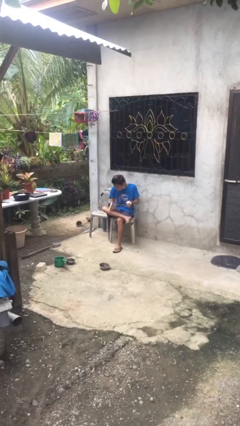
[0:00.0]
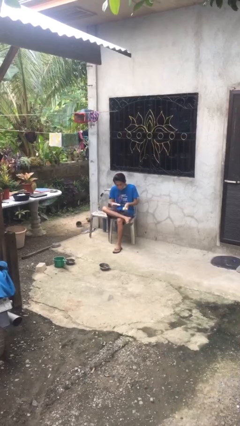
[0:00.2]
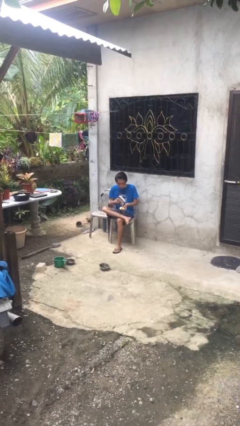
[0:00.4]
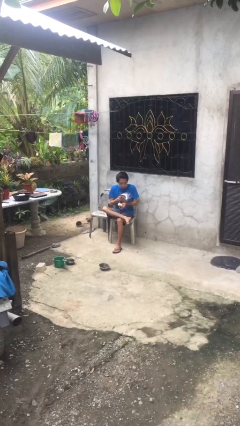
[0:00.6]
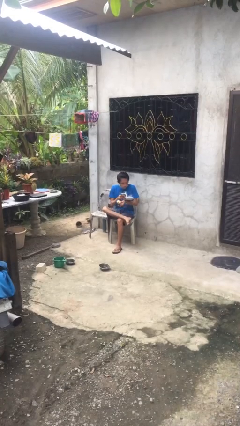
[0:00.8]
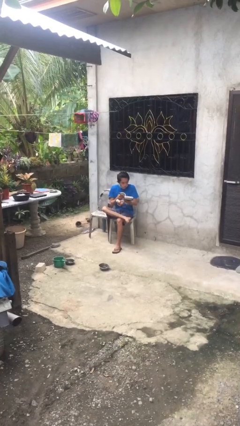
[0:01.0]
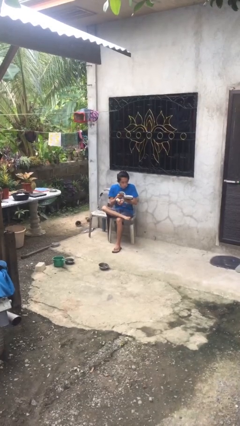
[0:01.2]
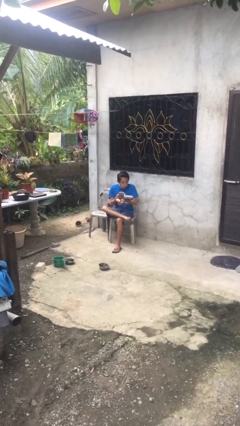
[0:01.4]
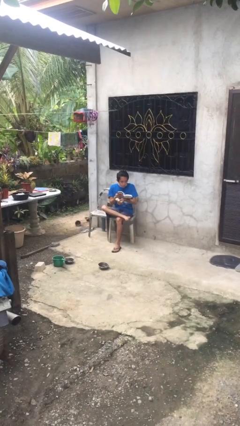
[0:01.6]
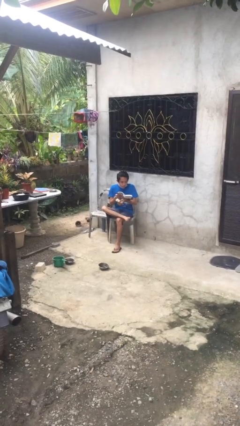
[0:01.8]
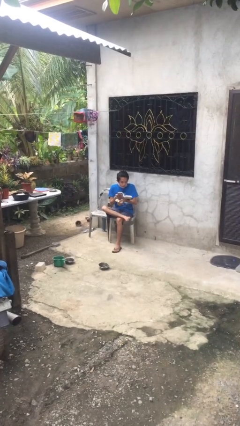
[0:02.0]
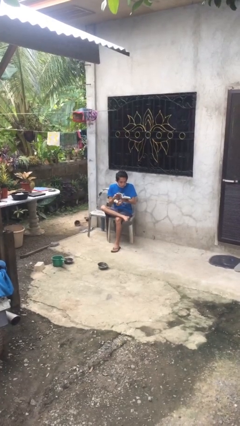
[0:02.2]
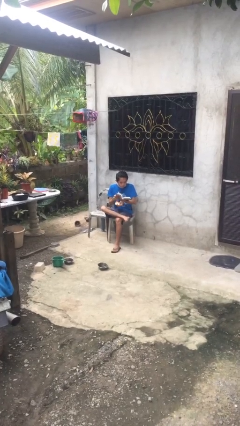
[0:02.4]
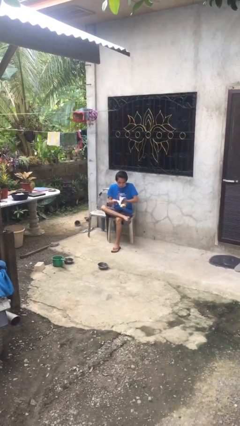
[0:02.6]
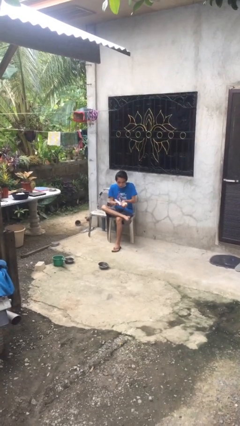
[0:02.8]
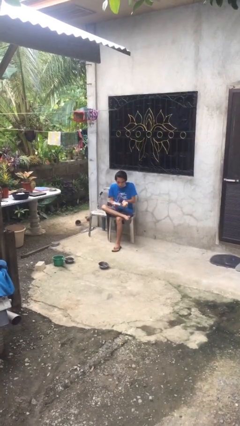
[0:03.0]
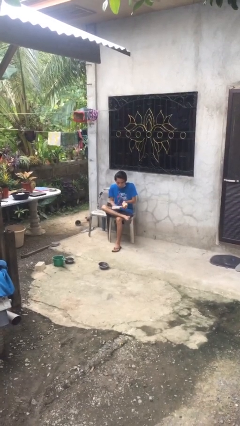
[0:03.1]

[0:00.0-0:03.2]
person reads document

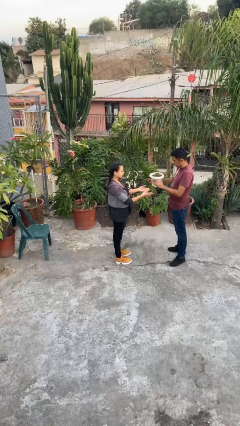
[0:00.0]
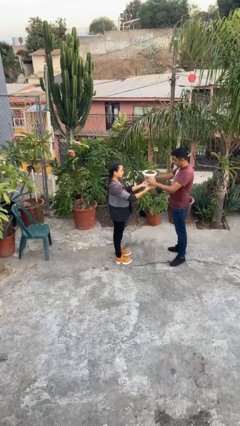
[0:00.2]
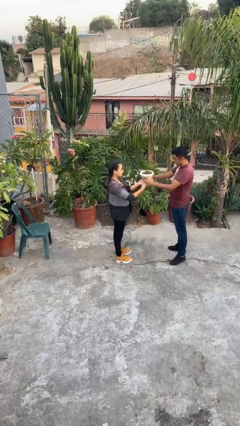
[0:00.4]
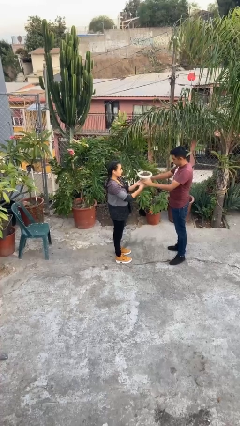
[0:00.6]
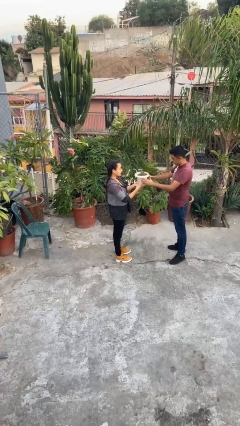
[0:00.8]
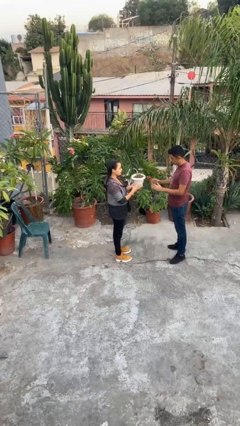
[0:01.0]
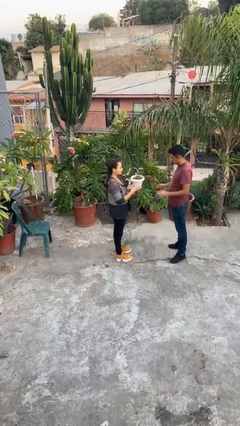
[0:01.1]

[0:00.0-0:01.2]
person transfers object to person

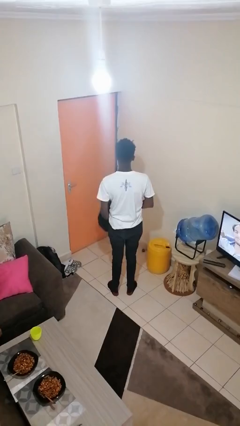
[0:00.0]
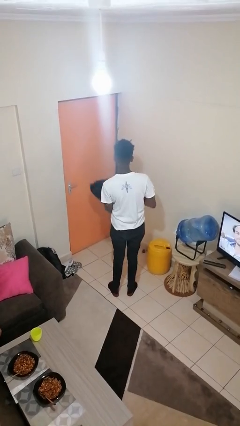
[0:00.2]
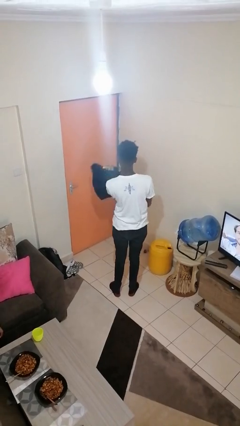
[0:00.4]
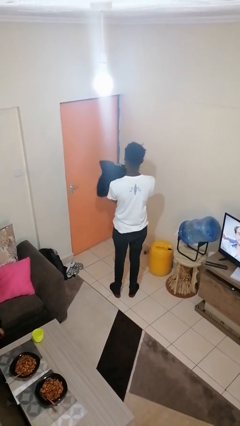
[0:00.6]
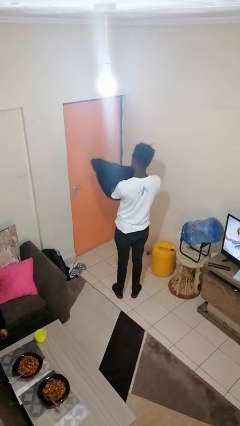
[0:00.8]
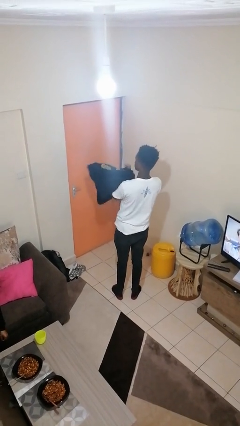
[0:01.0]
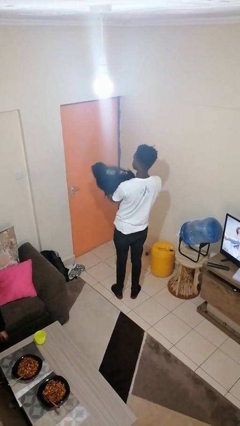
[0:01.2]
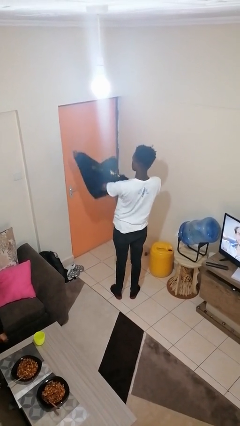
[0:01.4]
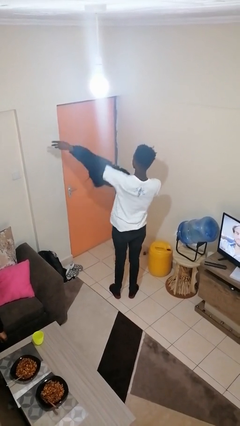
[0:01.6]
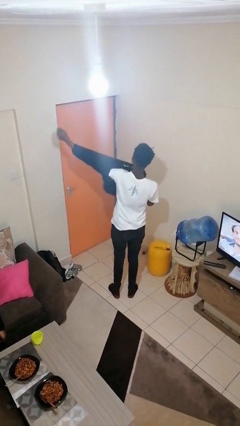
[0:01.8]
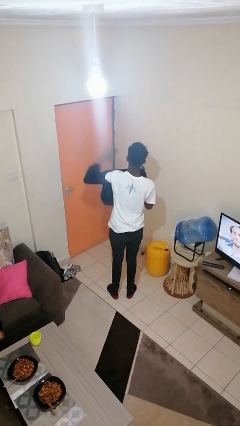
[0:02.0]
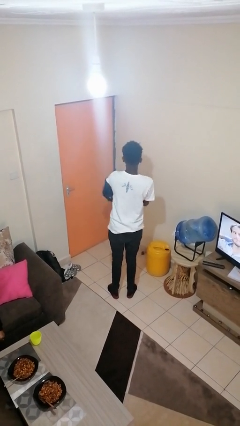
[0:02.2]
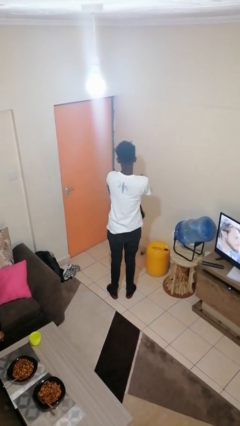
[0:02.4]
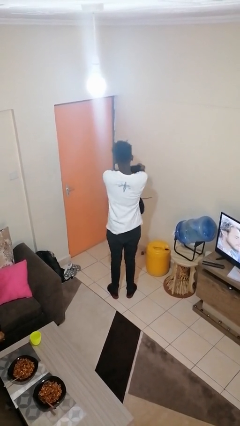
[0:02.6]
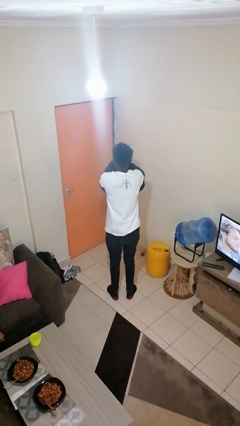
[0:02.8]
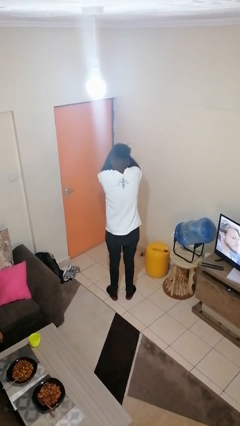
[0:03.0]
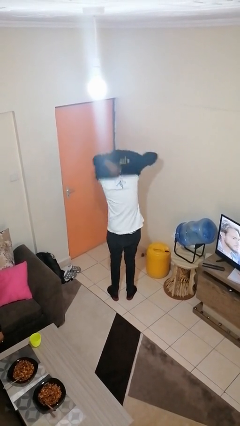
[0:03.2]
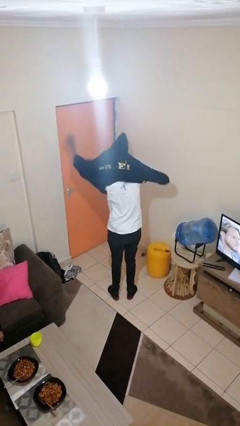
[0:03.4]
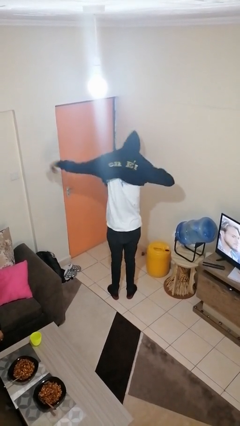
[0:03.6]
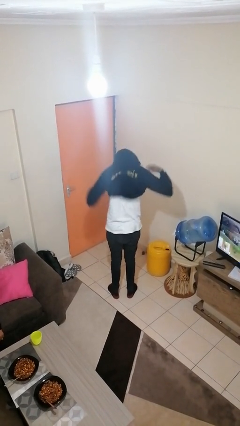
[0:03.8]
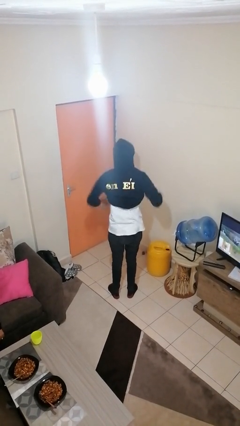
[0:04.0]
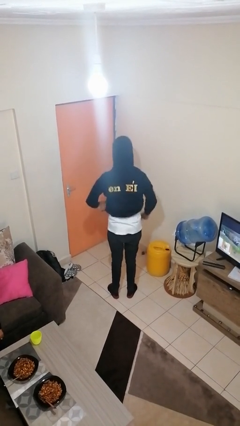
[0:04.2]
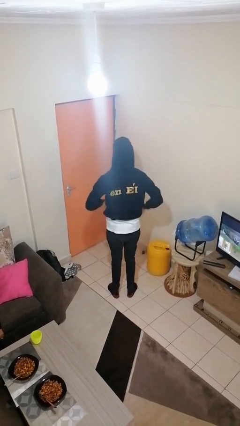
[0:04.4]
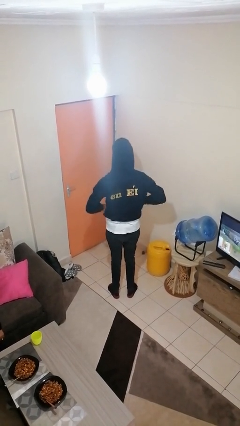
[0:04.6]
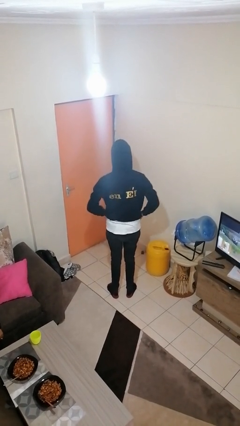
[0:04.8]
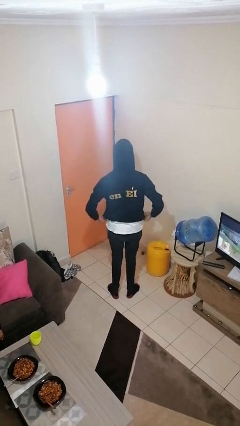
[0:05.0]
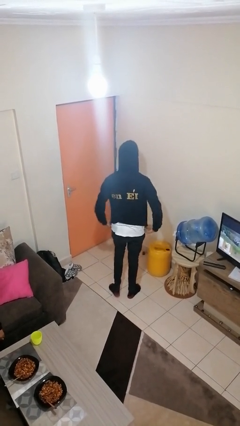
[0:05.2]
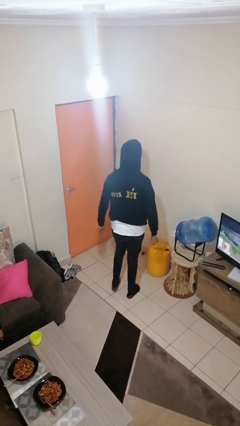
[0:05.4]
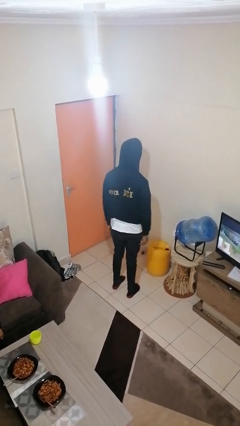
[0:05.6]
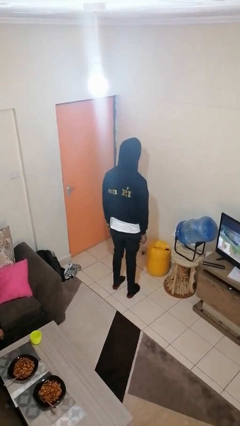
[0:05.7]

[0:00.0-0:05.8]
person puts on hoodie

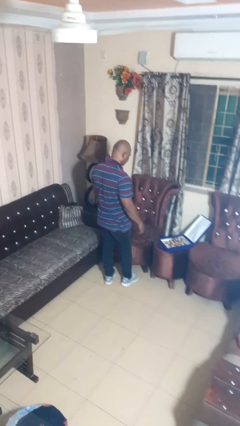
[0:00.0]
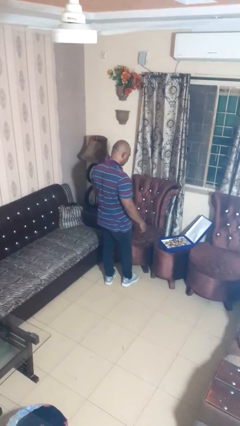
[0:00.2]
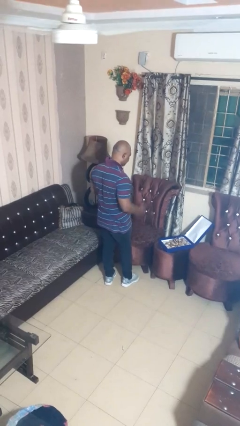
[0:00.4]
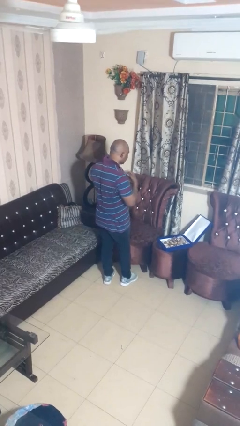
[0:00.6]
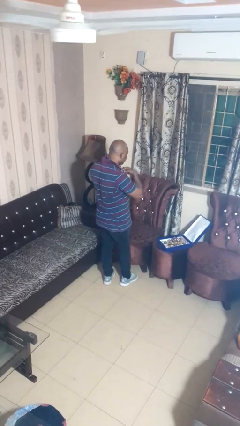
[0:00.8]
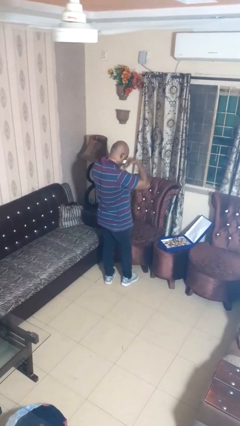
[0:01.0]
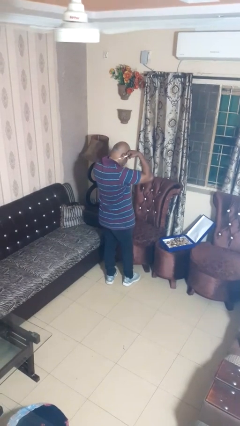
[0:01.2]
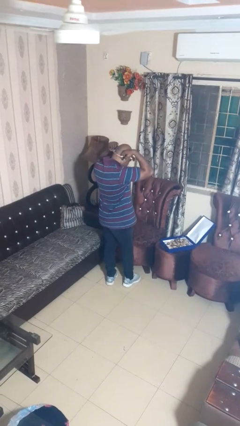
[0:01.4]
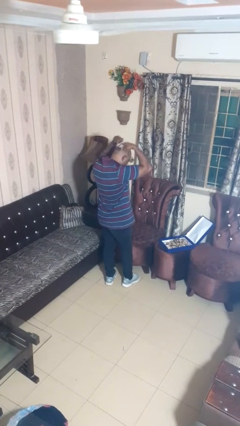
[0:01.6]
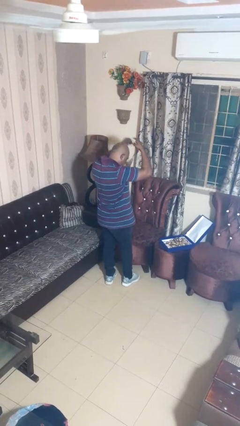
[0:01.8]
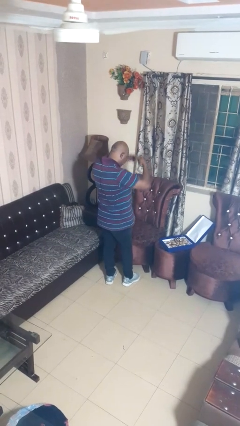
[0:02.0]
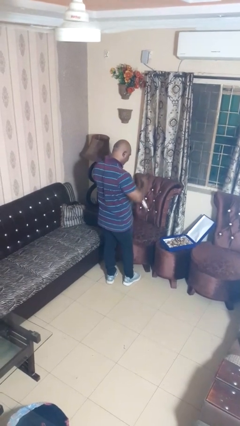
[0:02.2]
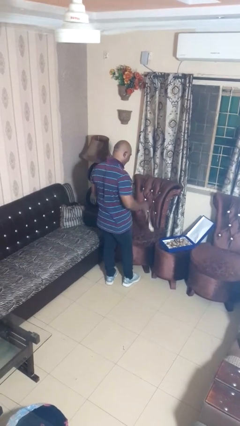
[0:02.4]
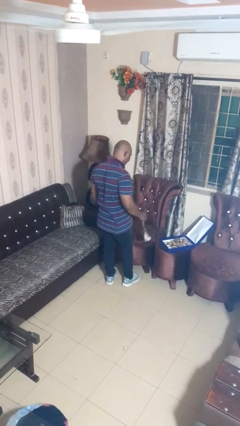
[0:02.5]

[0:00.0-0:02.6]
person takes off necklace

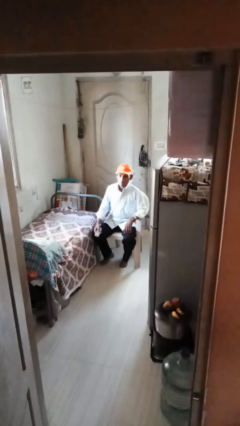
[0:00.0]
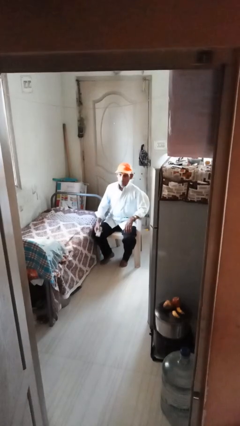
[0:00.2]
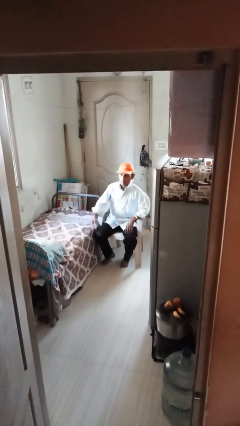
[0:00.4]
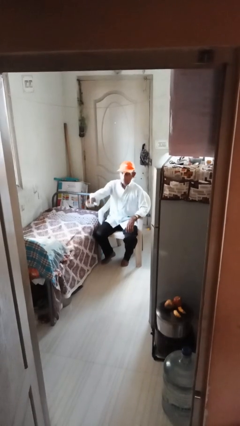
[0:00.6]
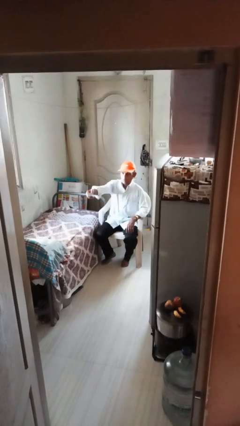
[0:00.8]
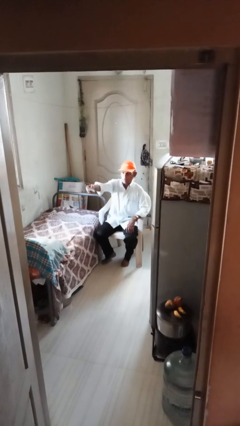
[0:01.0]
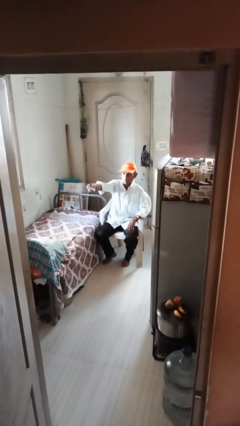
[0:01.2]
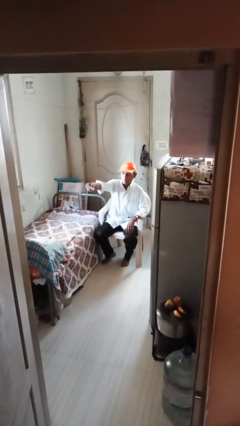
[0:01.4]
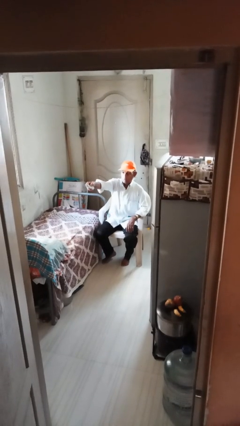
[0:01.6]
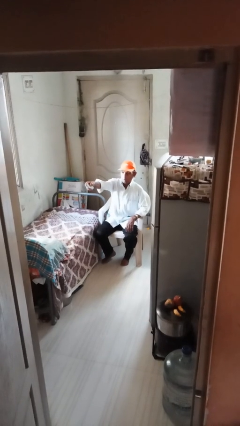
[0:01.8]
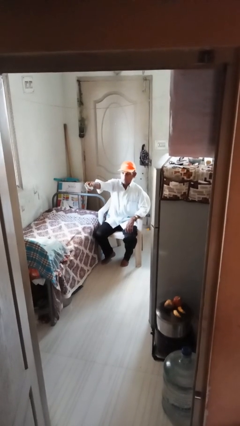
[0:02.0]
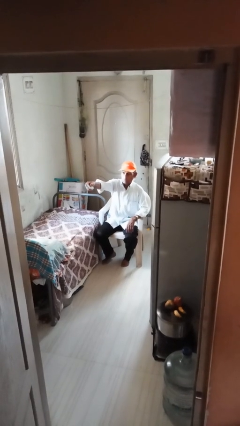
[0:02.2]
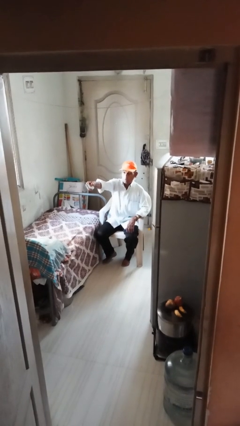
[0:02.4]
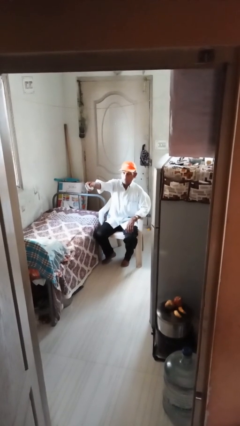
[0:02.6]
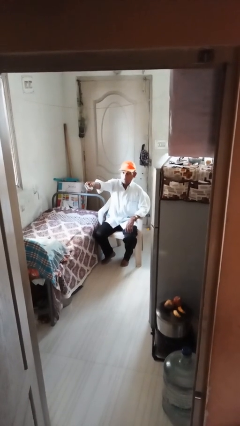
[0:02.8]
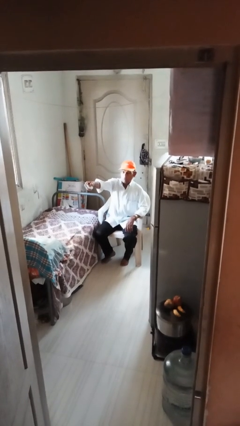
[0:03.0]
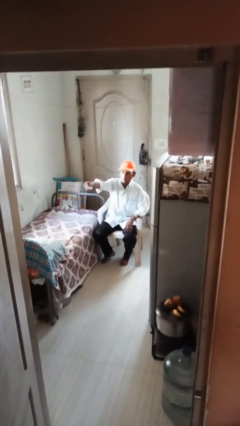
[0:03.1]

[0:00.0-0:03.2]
person uses television remote

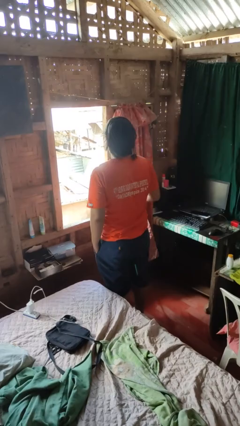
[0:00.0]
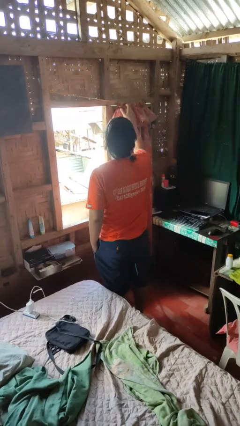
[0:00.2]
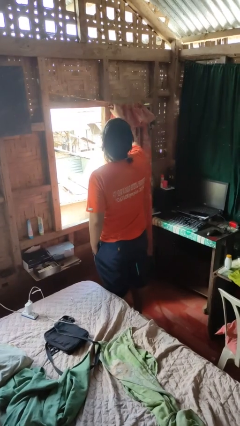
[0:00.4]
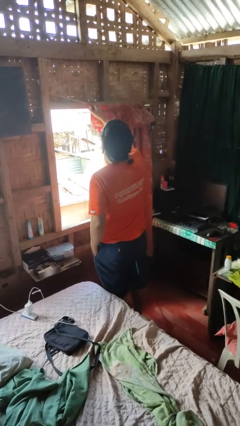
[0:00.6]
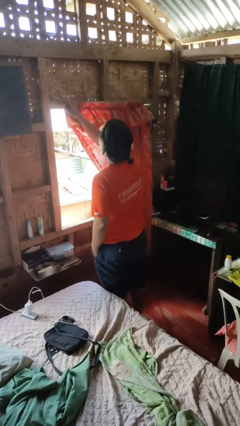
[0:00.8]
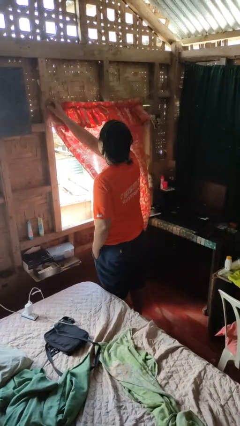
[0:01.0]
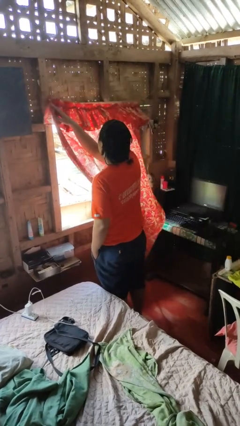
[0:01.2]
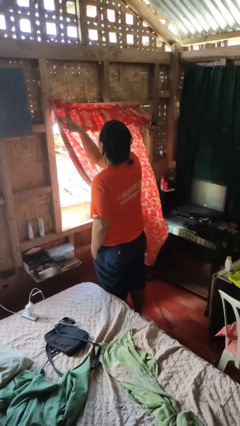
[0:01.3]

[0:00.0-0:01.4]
person closes curtains
